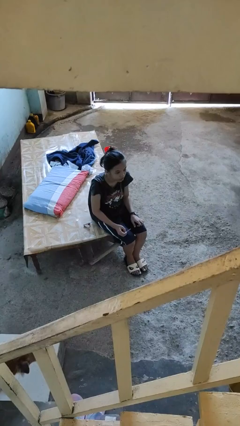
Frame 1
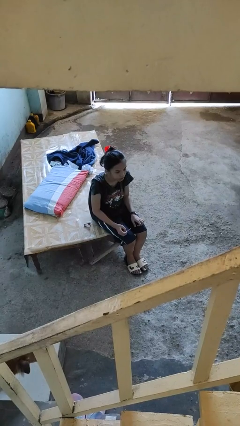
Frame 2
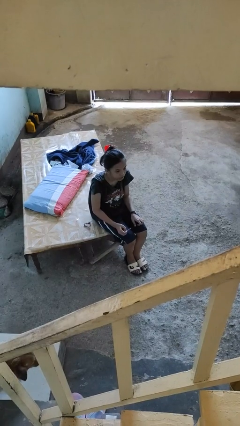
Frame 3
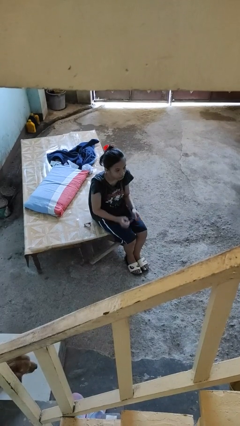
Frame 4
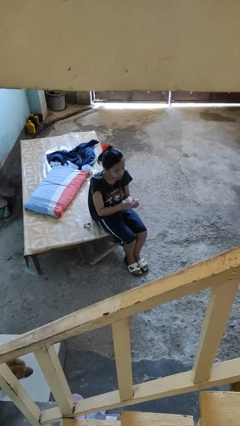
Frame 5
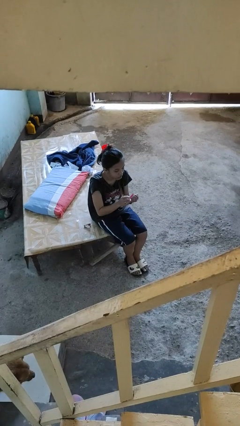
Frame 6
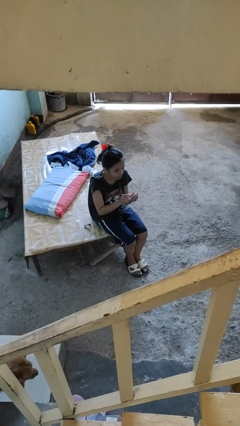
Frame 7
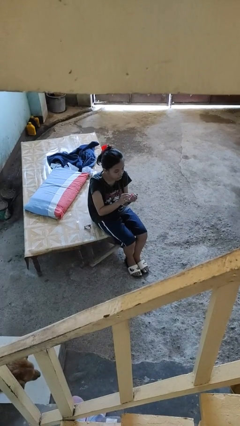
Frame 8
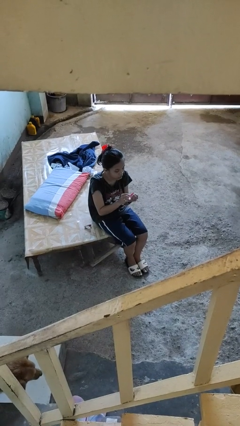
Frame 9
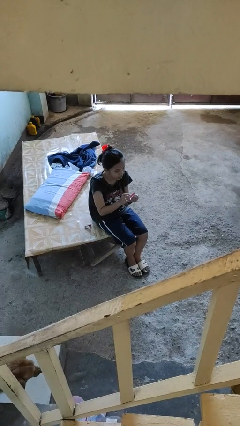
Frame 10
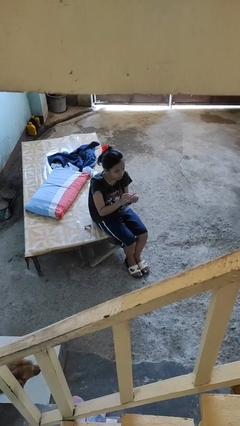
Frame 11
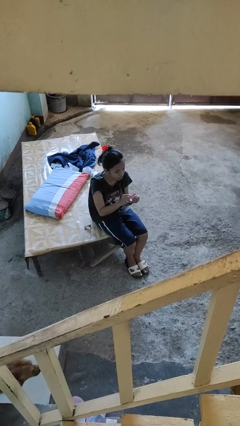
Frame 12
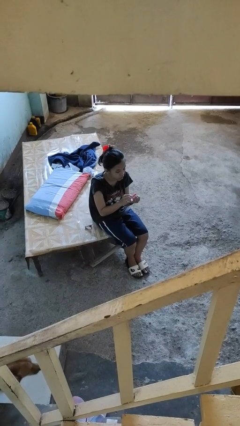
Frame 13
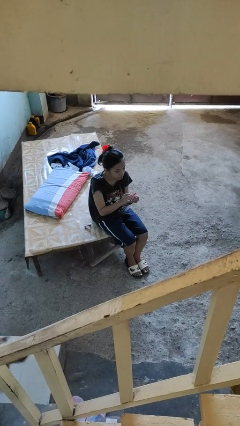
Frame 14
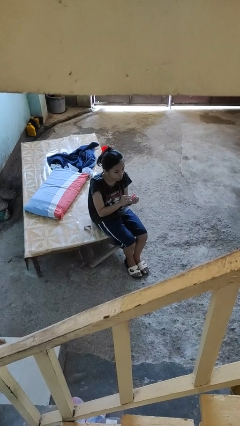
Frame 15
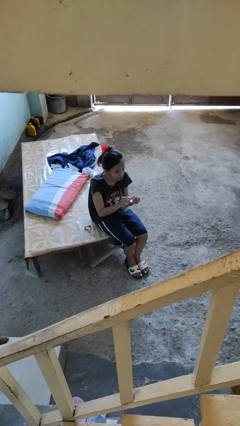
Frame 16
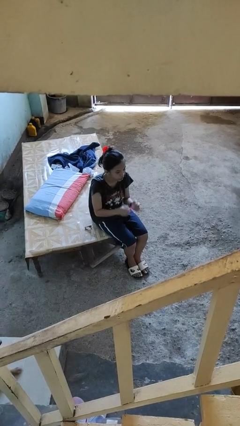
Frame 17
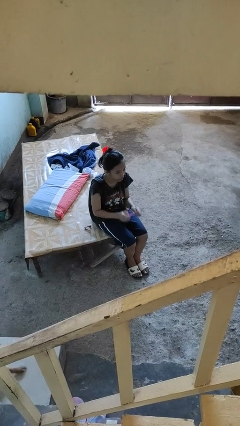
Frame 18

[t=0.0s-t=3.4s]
person files fingernails

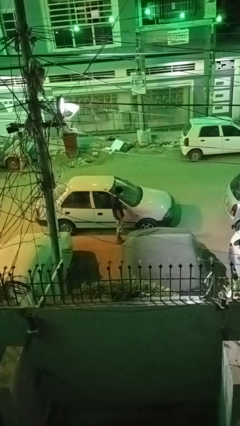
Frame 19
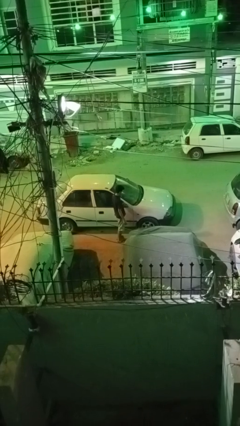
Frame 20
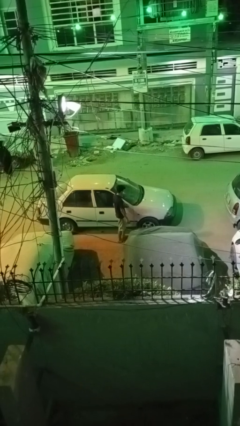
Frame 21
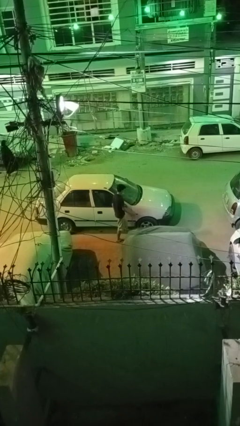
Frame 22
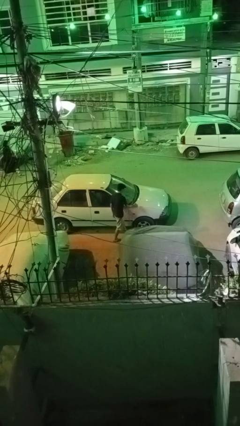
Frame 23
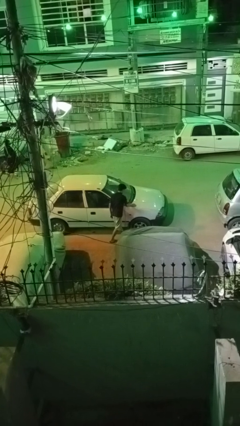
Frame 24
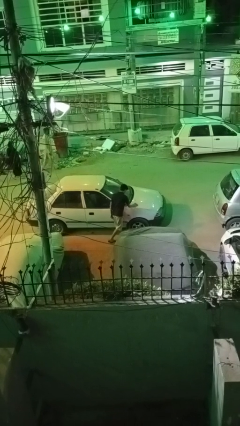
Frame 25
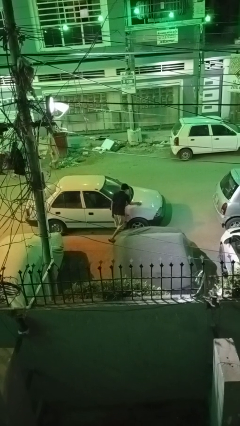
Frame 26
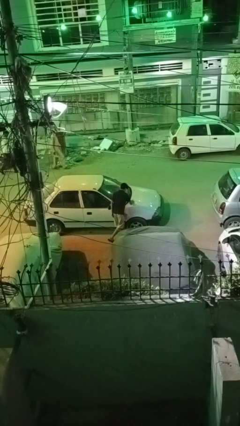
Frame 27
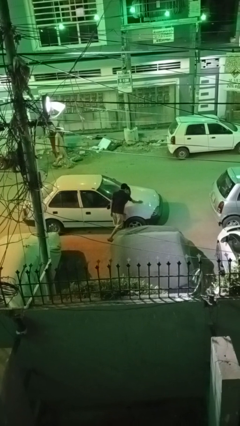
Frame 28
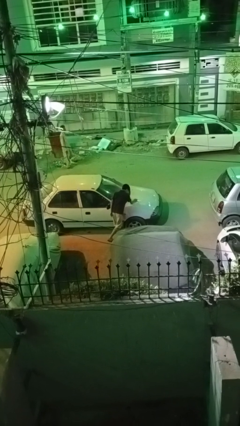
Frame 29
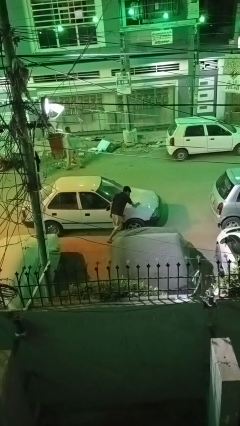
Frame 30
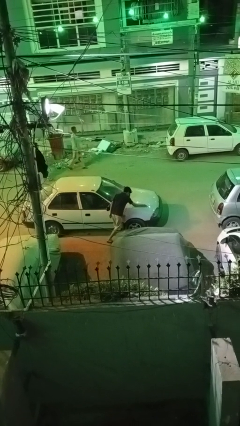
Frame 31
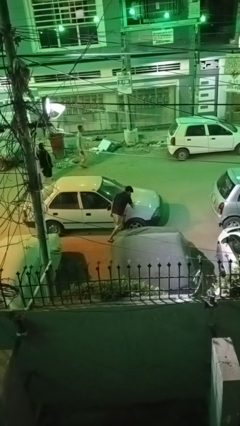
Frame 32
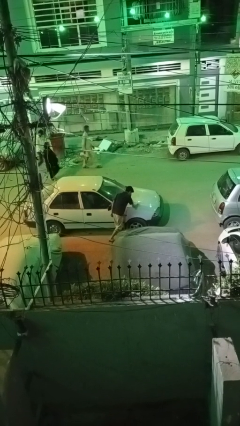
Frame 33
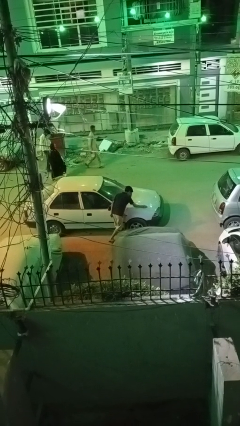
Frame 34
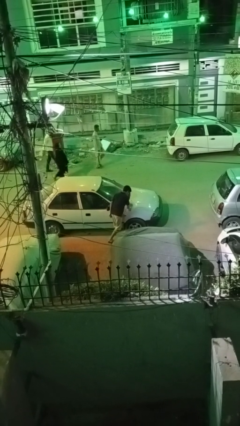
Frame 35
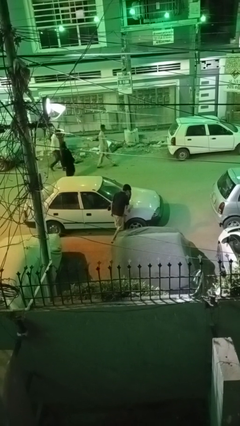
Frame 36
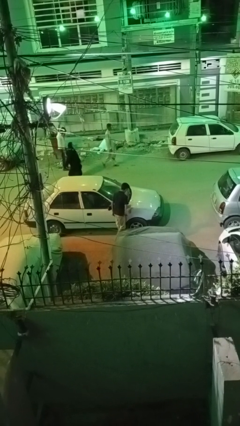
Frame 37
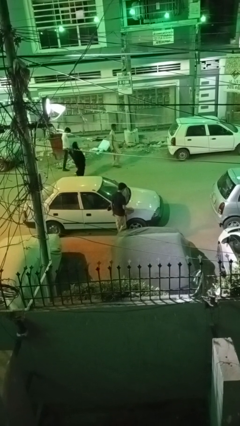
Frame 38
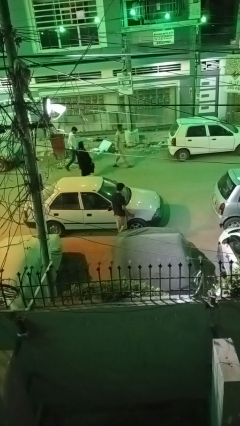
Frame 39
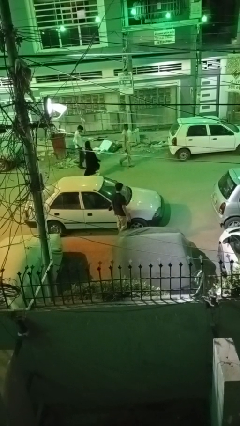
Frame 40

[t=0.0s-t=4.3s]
person polishes car with rag

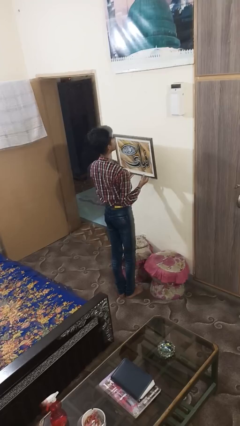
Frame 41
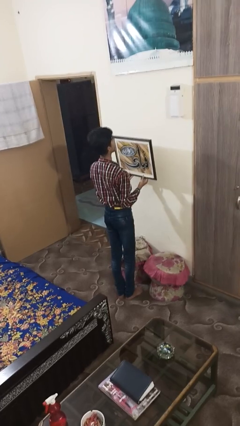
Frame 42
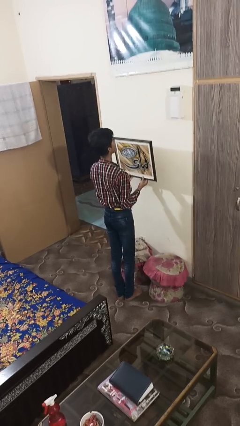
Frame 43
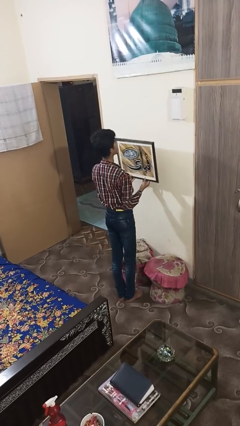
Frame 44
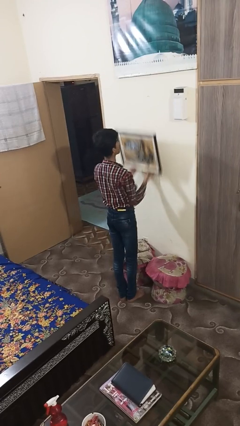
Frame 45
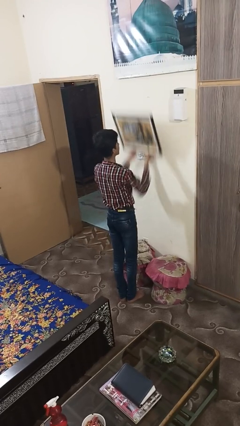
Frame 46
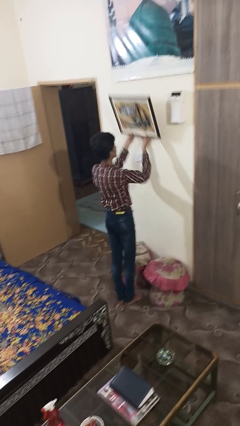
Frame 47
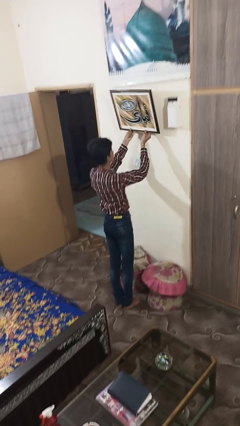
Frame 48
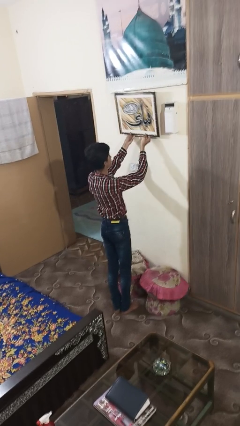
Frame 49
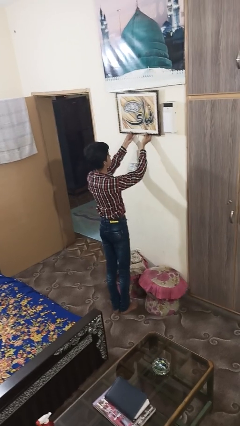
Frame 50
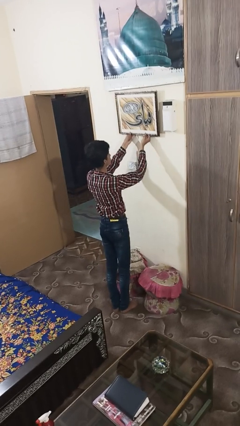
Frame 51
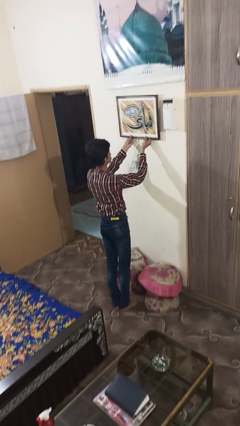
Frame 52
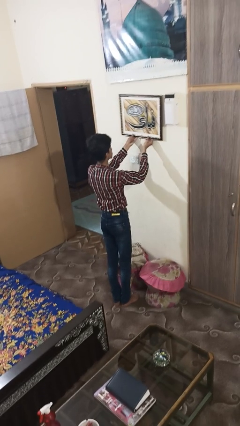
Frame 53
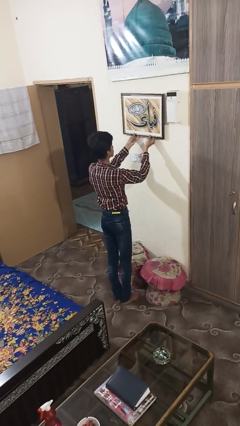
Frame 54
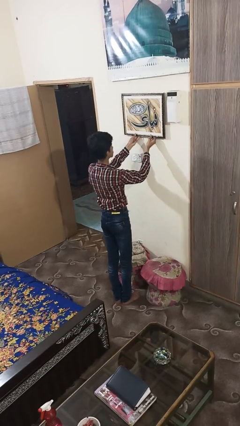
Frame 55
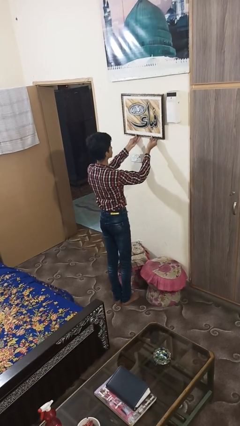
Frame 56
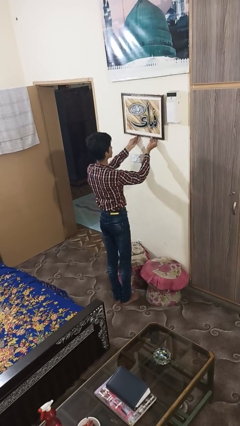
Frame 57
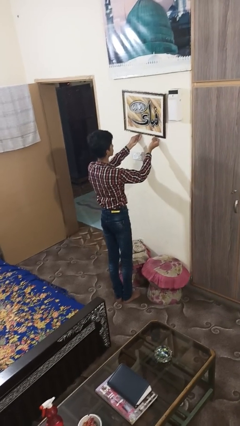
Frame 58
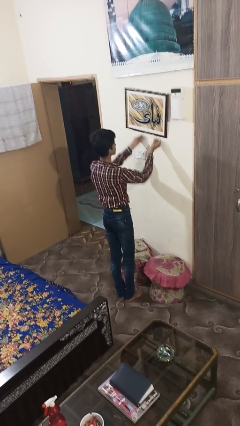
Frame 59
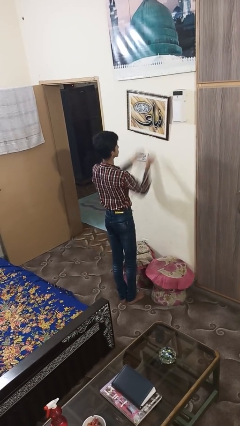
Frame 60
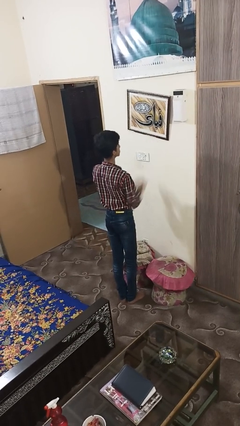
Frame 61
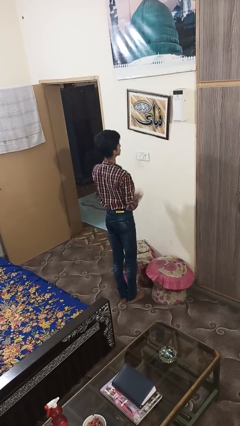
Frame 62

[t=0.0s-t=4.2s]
person puts up picture frame

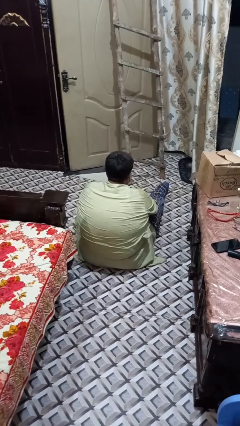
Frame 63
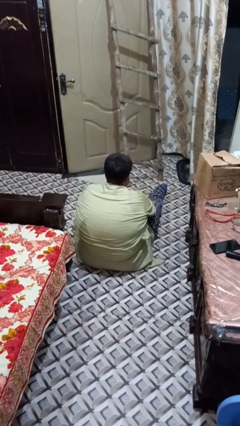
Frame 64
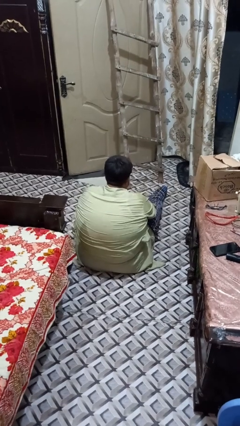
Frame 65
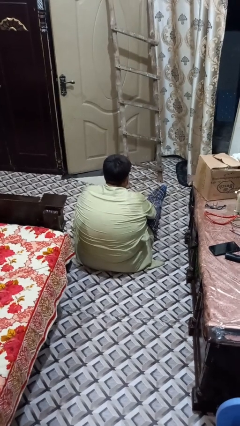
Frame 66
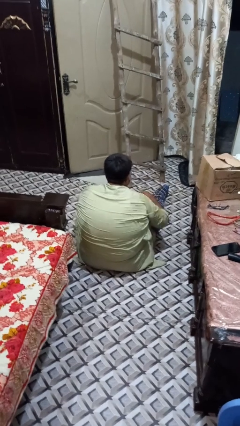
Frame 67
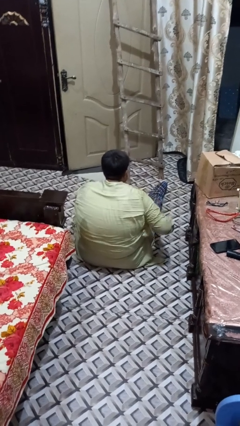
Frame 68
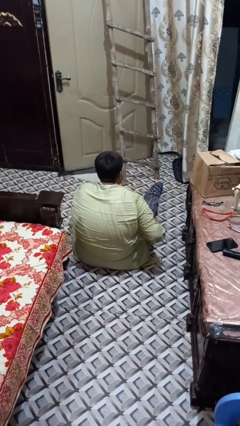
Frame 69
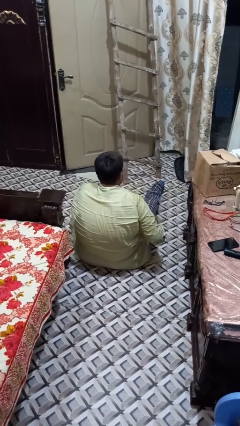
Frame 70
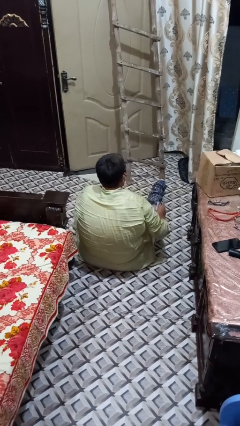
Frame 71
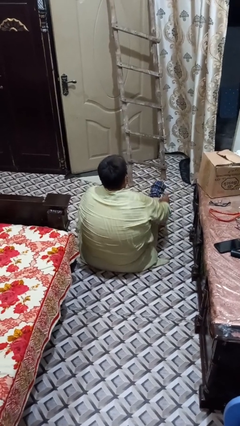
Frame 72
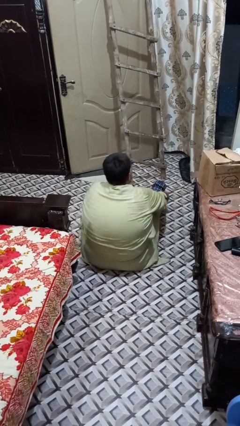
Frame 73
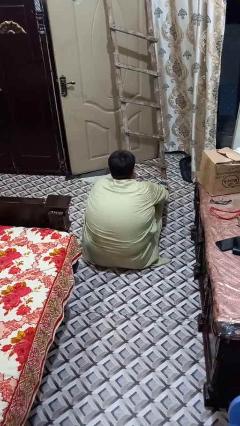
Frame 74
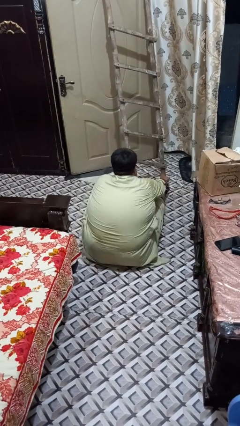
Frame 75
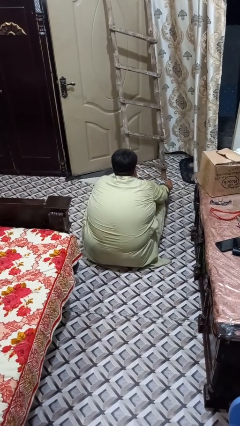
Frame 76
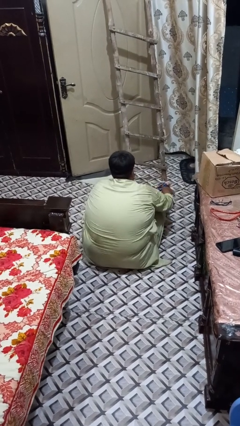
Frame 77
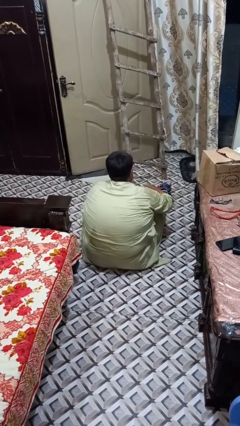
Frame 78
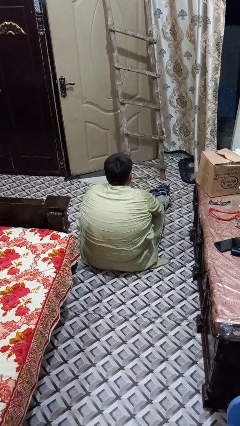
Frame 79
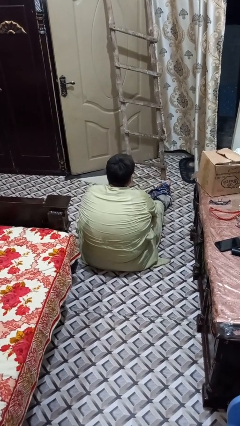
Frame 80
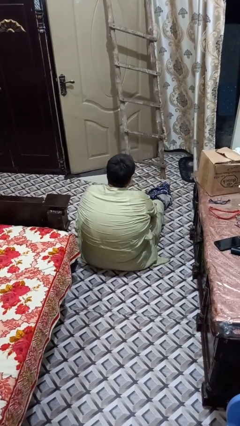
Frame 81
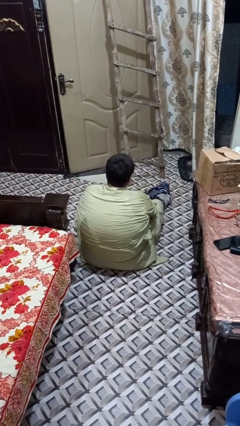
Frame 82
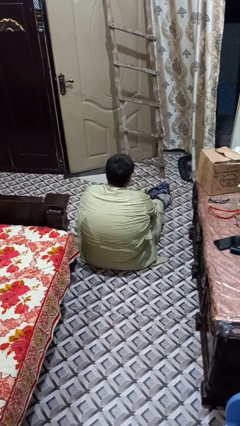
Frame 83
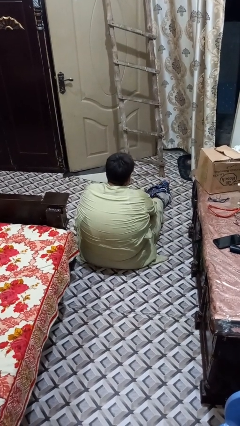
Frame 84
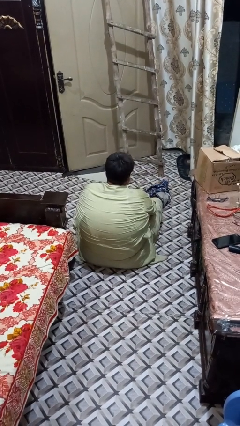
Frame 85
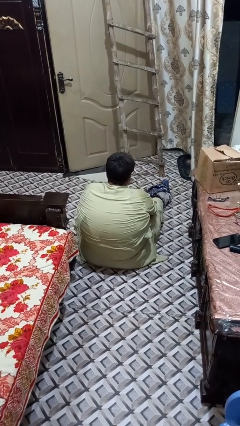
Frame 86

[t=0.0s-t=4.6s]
person takes off pants

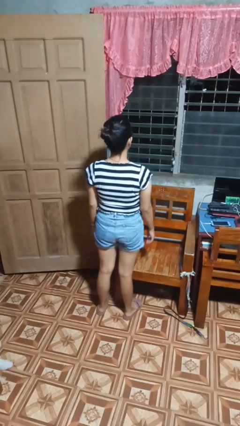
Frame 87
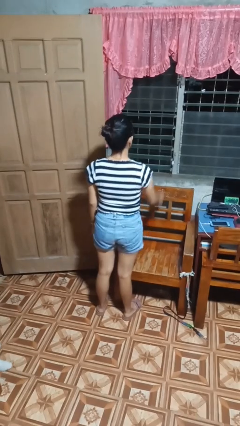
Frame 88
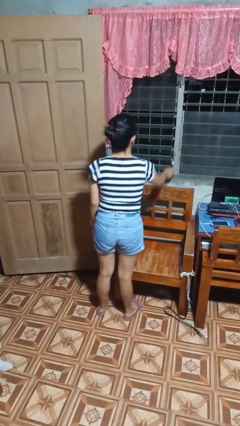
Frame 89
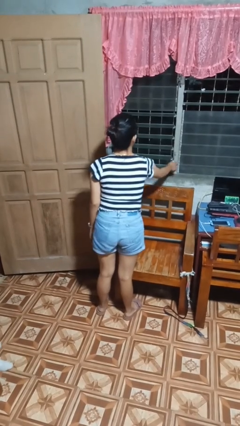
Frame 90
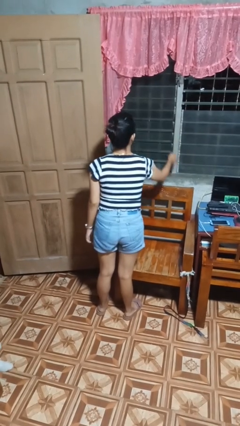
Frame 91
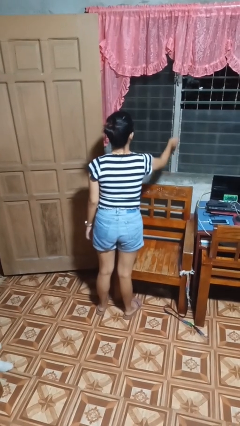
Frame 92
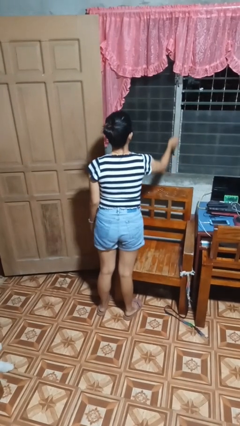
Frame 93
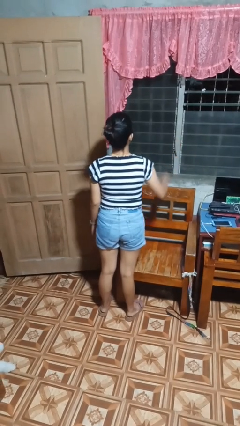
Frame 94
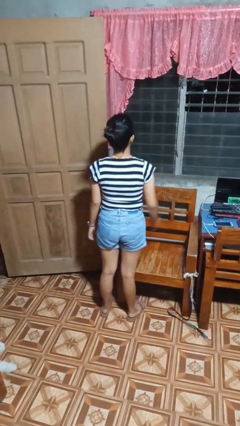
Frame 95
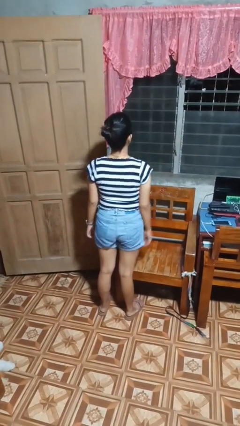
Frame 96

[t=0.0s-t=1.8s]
person closes home window
